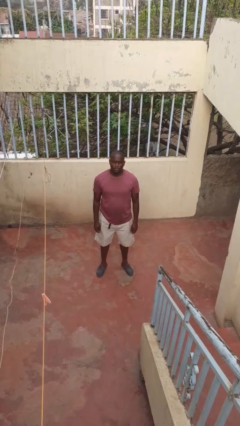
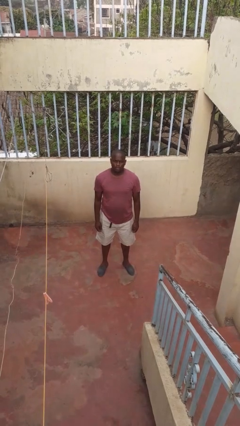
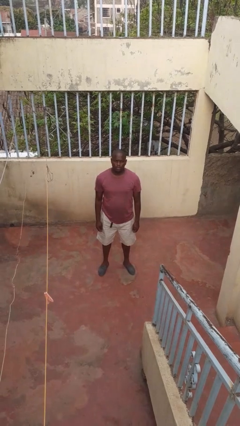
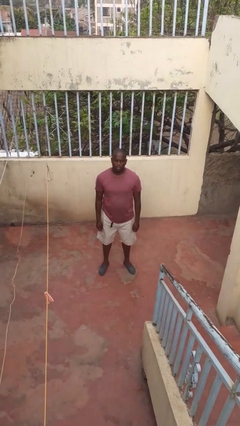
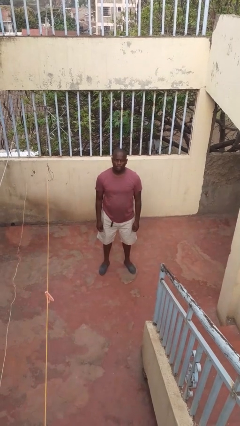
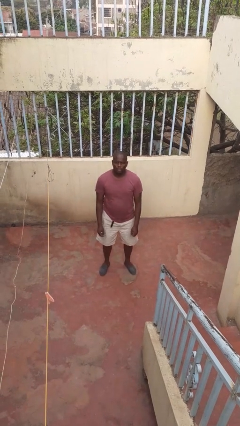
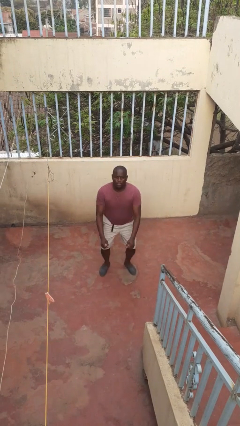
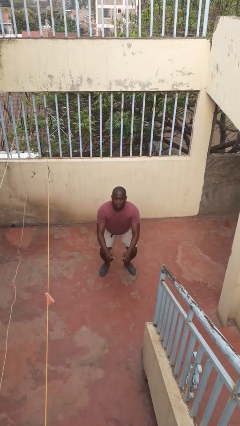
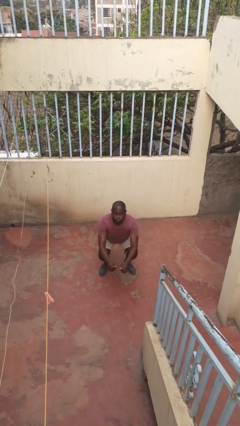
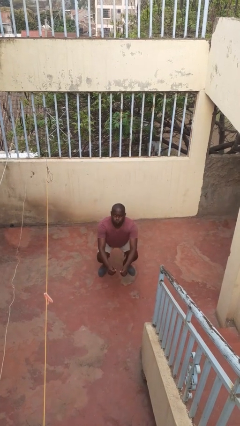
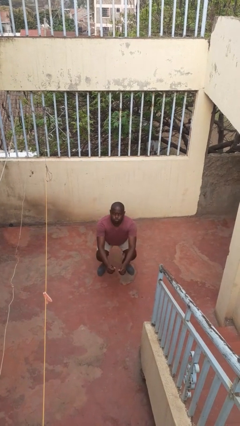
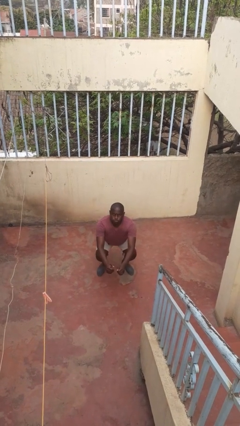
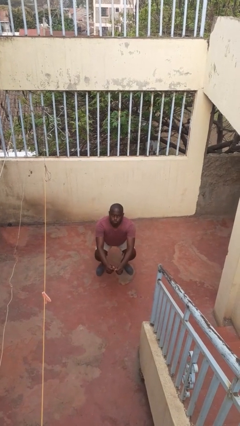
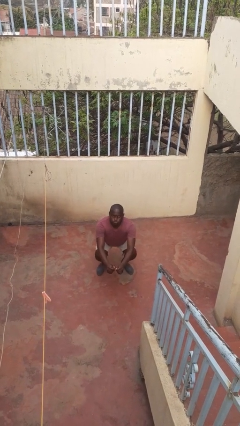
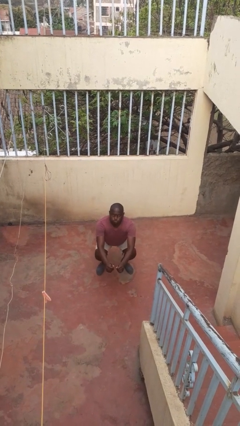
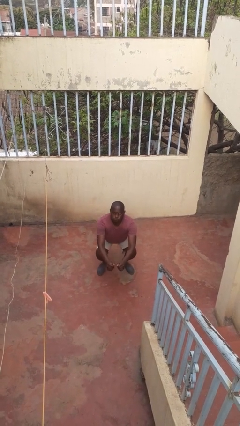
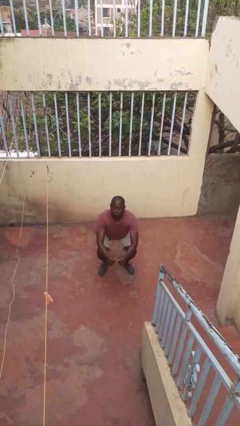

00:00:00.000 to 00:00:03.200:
person squats

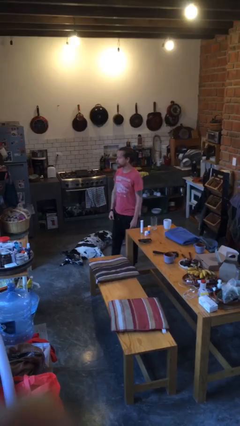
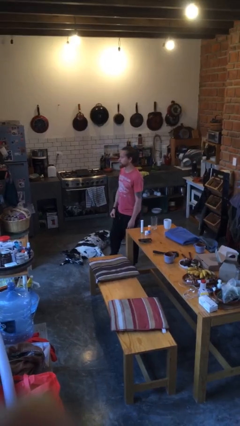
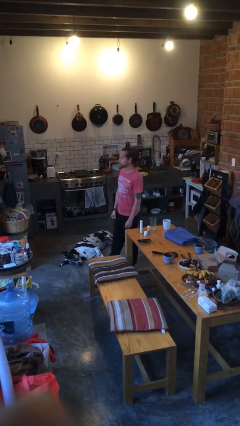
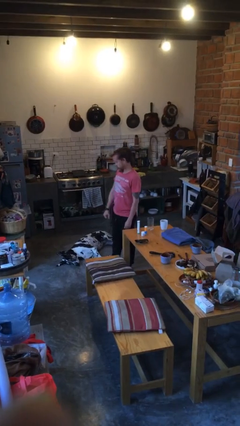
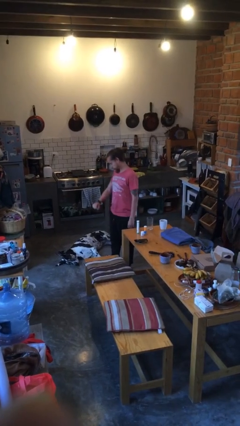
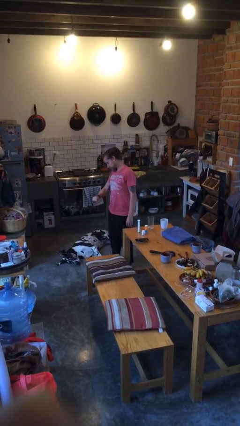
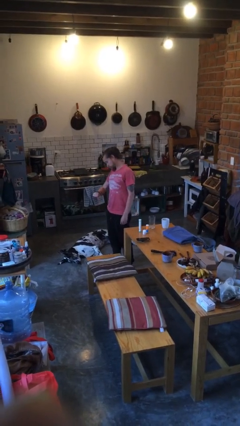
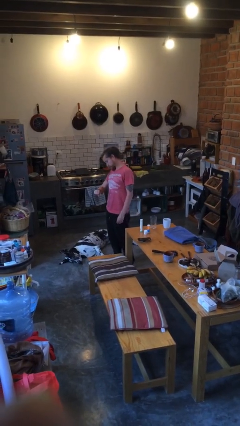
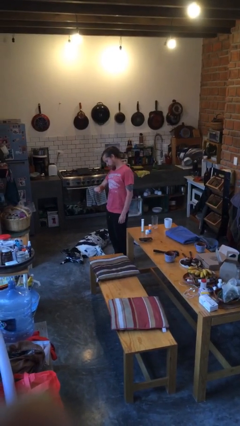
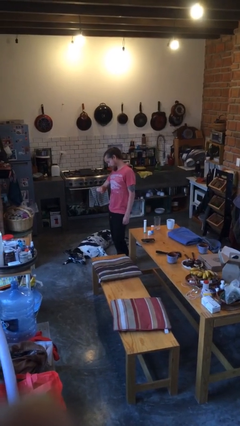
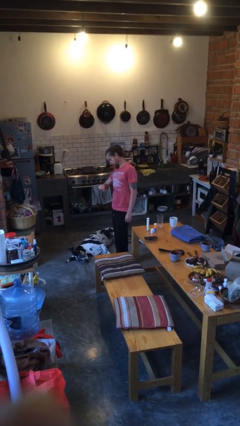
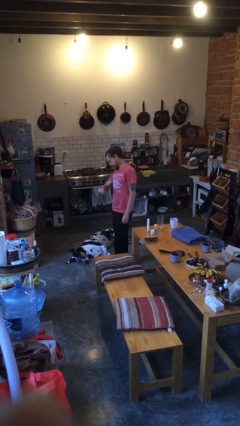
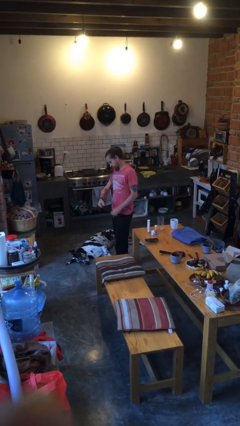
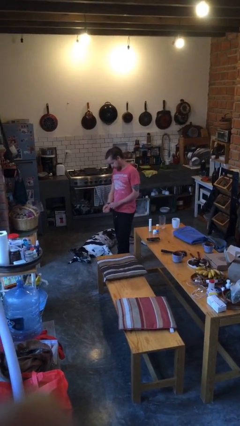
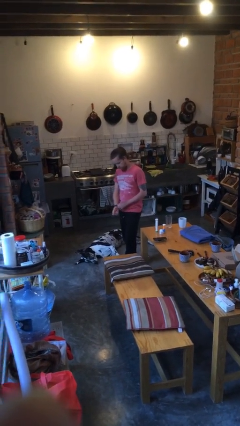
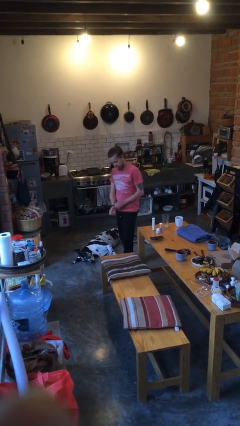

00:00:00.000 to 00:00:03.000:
person looks at wristwatch

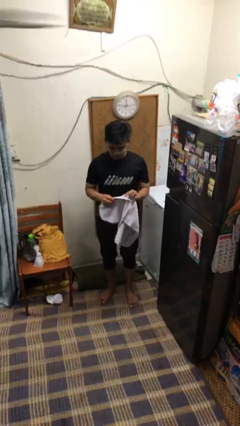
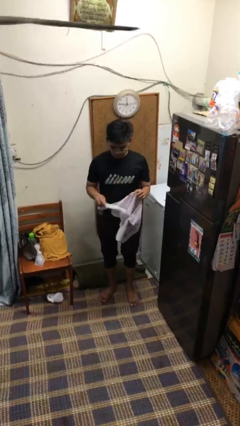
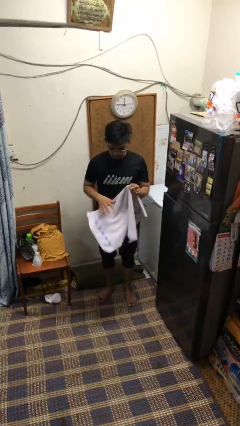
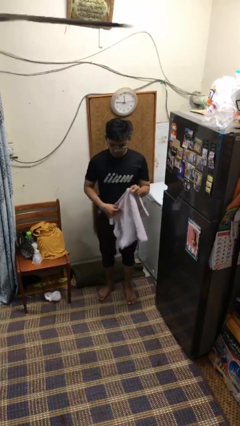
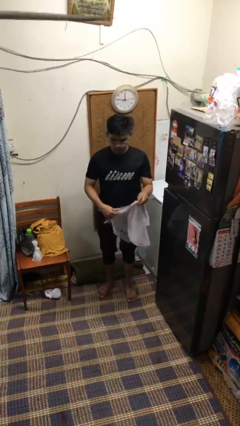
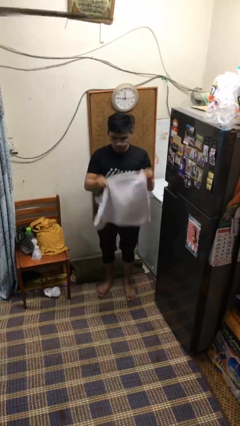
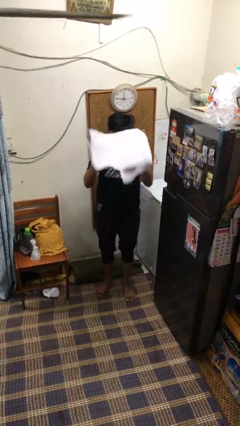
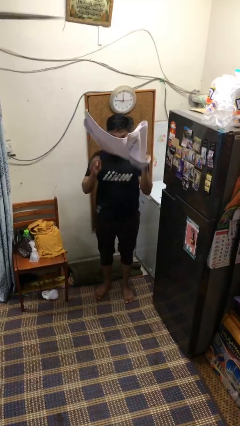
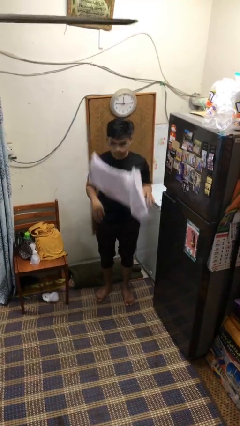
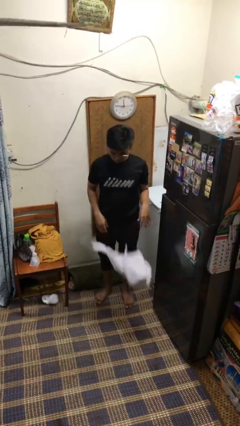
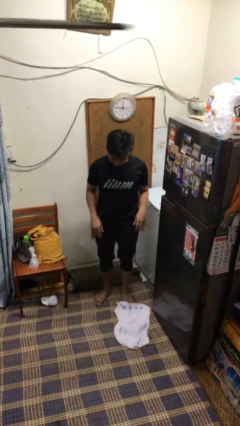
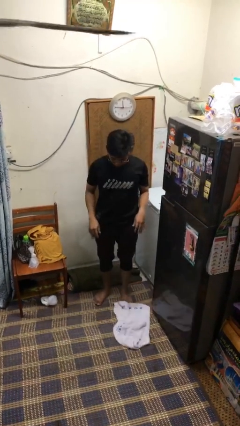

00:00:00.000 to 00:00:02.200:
person throws object into air

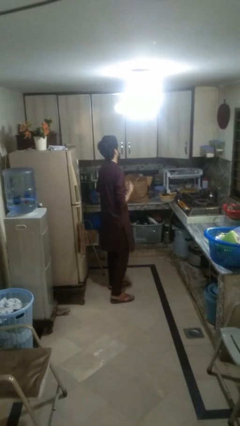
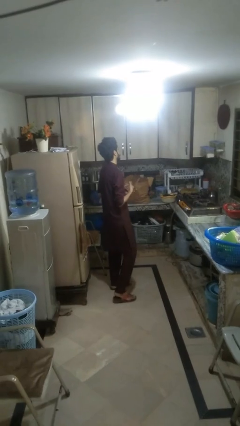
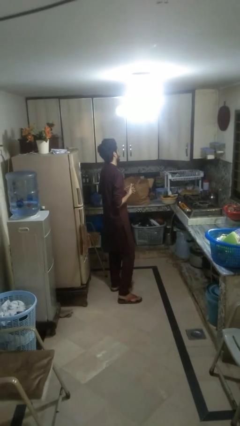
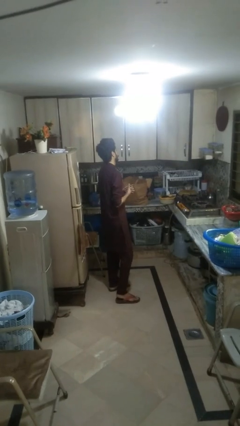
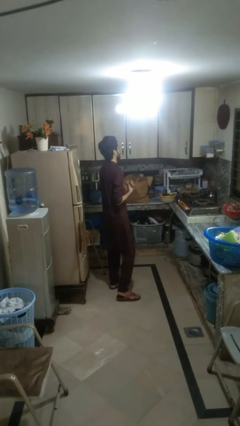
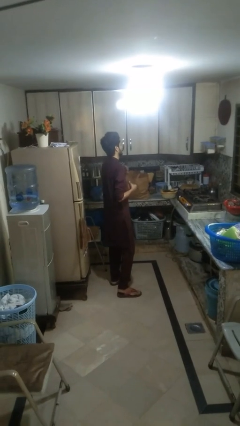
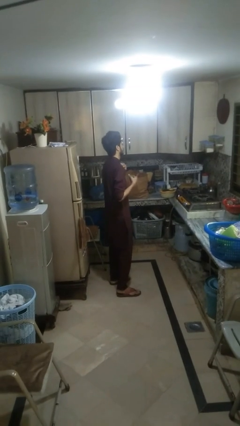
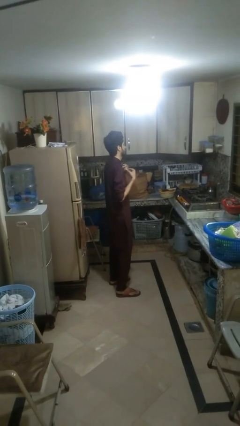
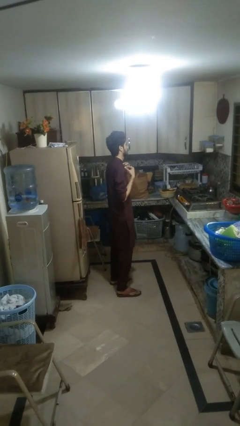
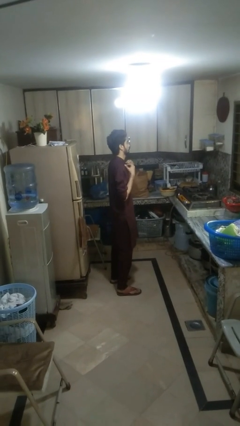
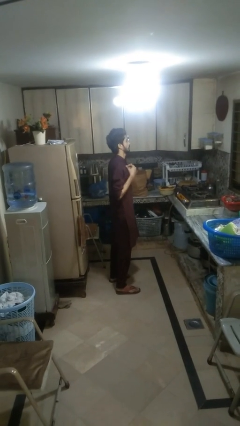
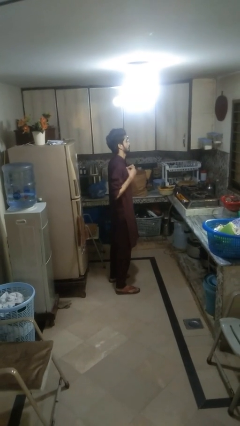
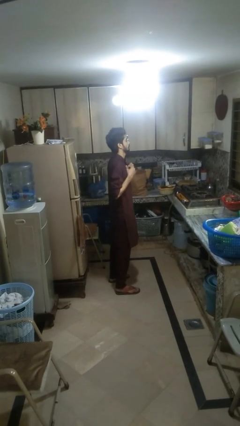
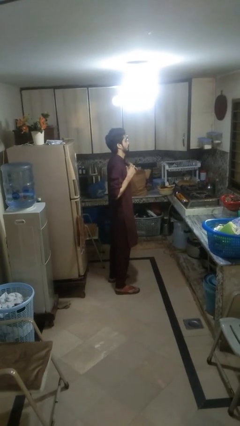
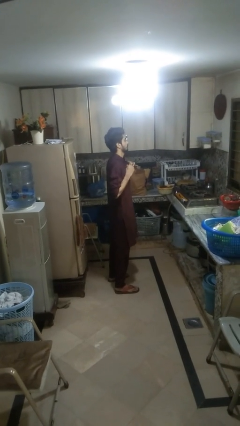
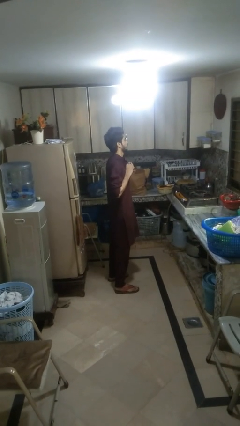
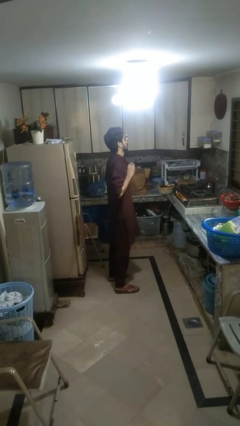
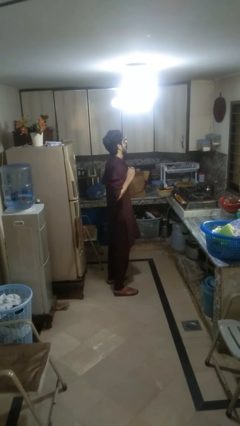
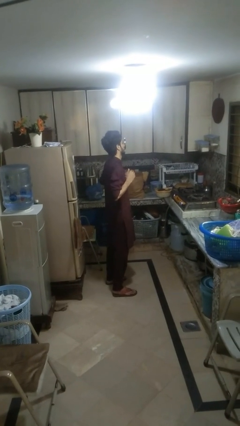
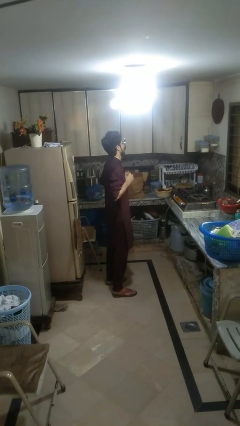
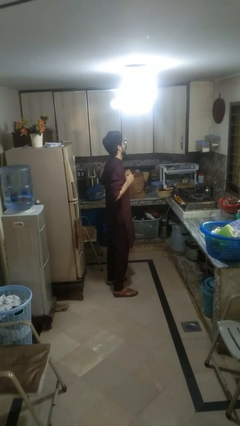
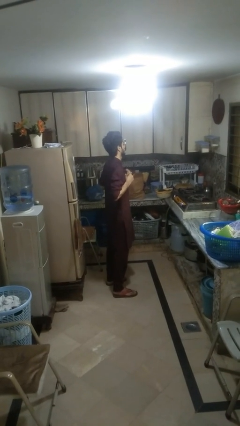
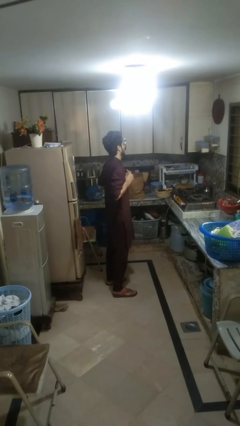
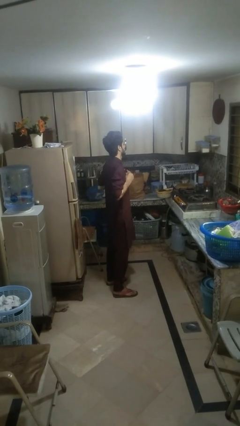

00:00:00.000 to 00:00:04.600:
person unbuttons shirt

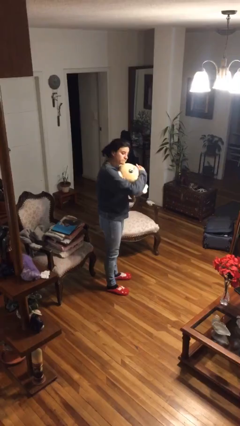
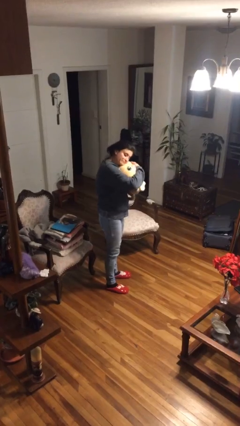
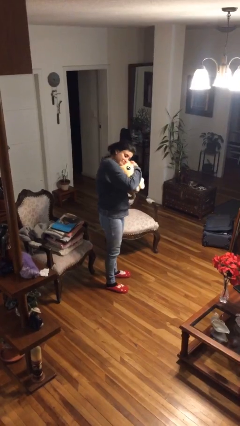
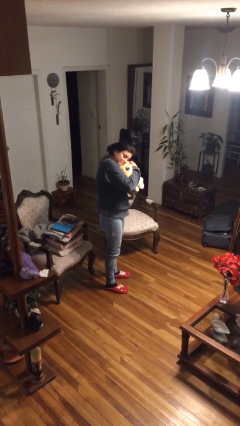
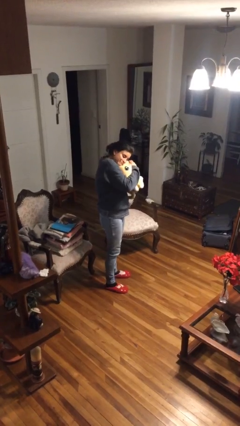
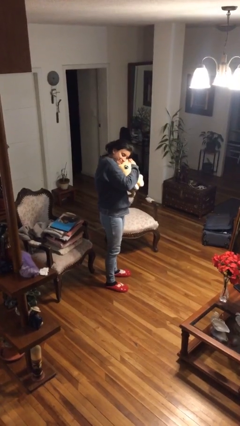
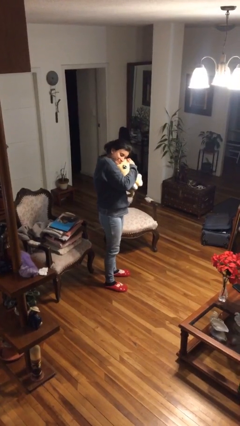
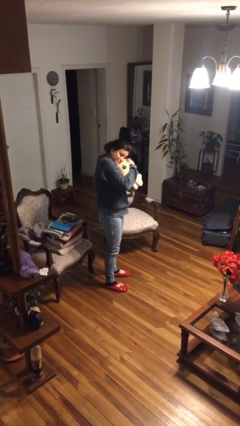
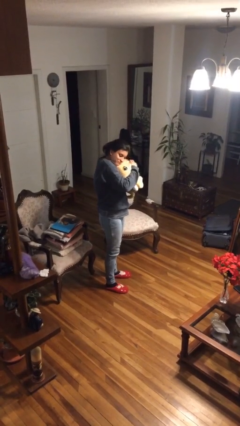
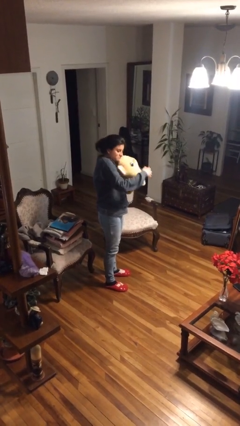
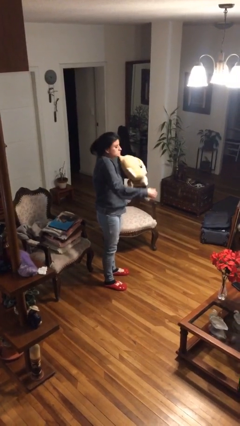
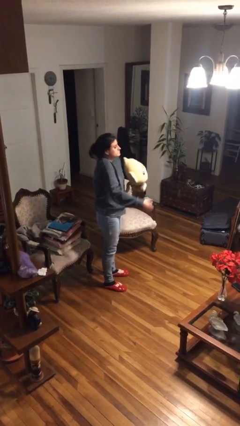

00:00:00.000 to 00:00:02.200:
person hugs stuffed animal

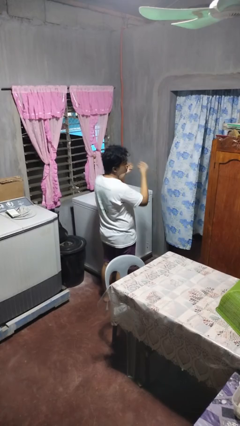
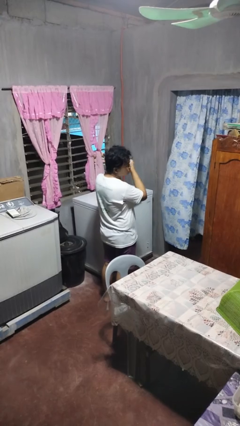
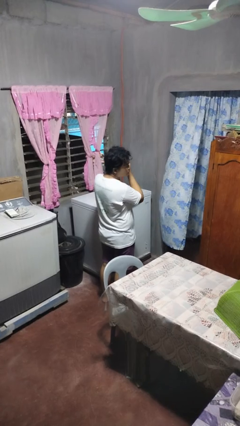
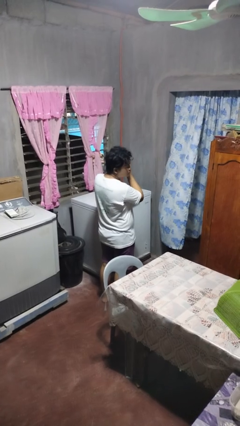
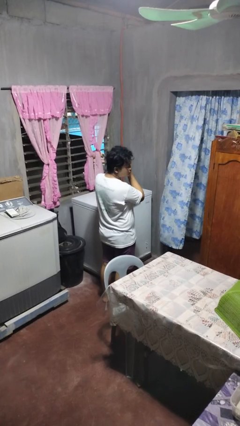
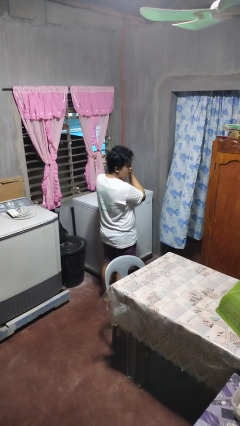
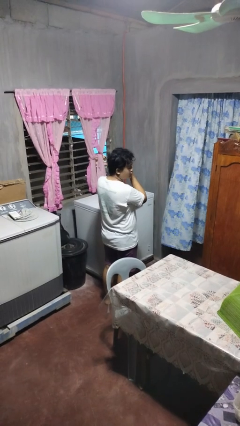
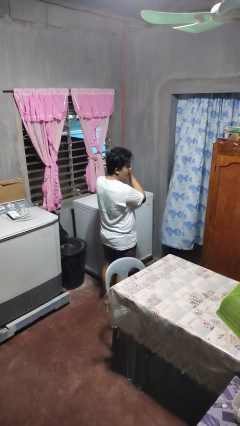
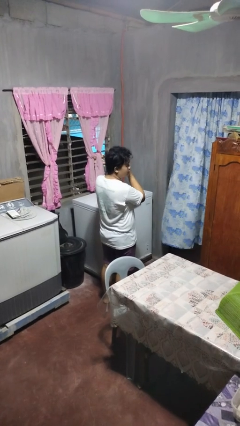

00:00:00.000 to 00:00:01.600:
person puts on earrings

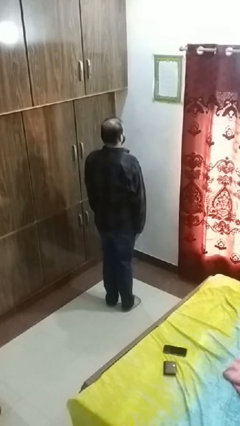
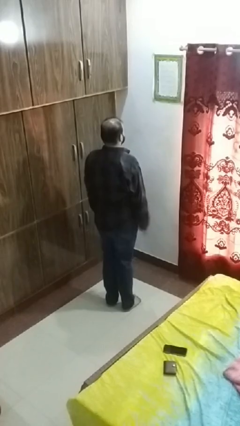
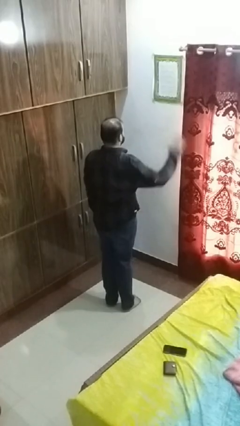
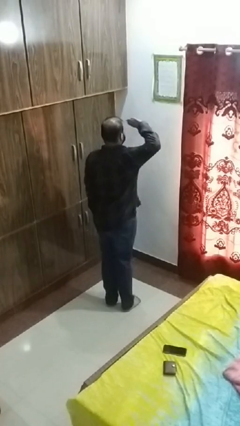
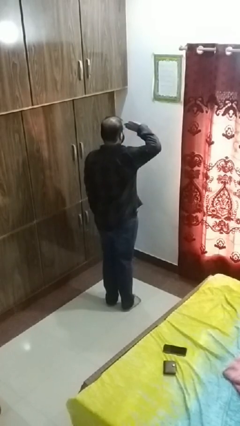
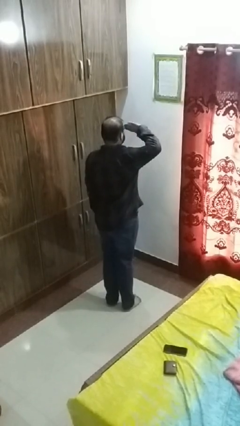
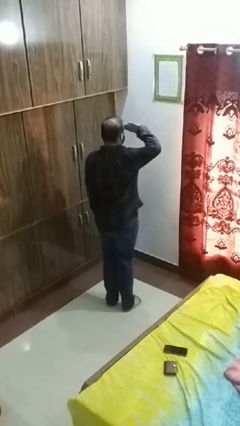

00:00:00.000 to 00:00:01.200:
person salutes
